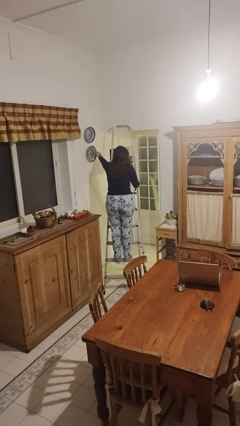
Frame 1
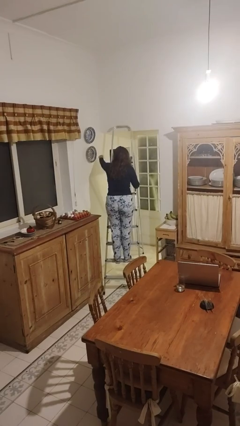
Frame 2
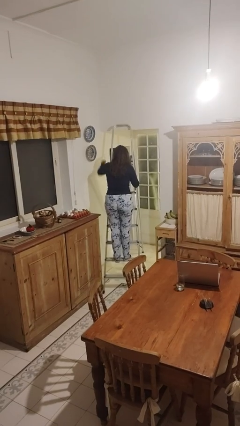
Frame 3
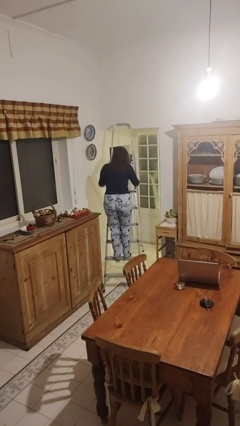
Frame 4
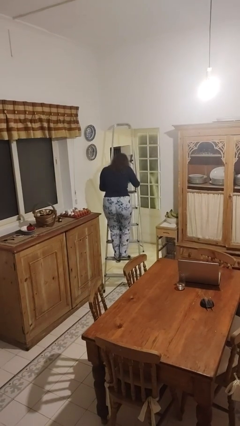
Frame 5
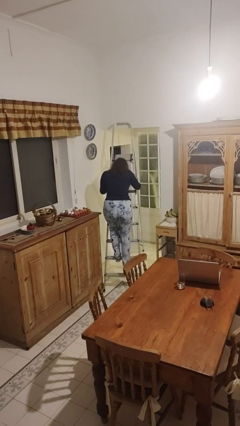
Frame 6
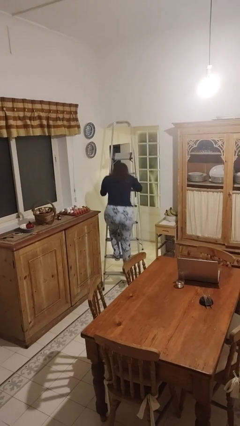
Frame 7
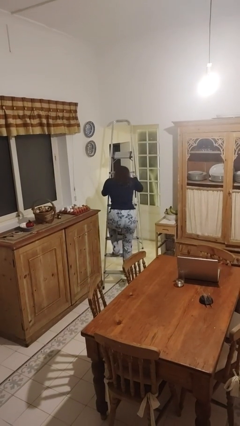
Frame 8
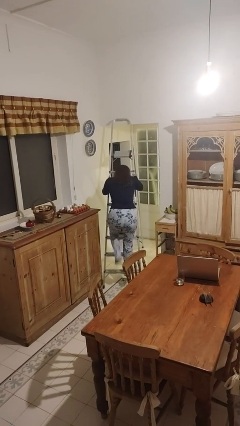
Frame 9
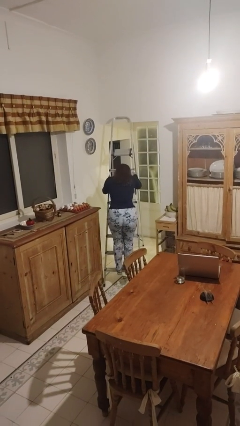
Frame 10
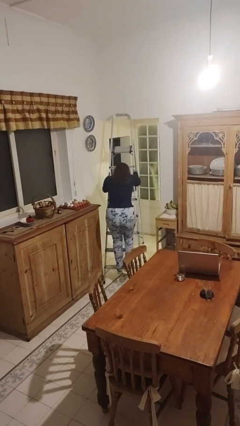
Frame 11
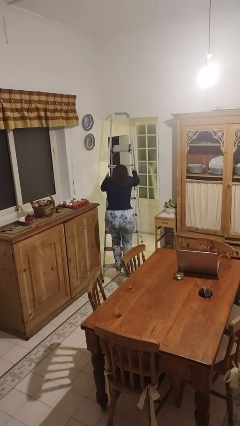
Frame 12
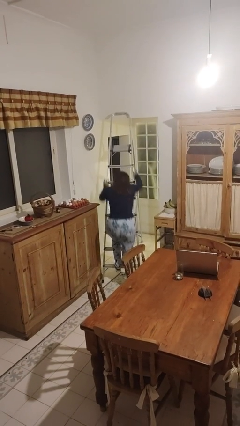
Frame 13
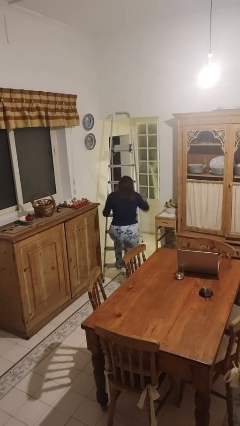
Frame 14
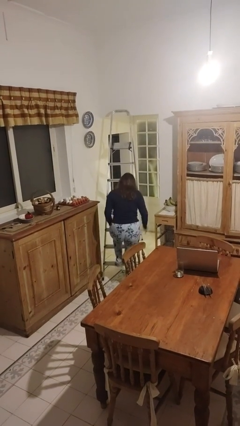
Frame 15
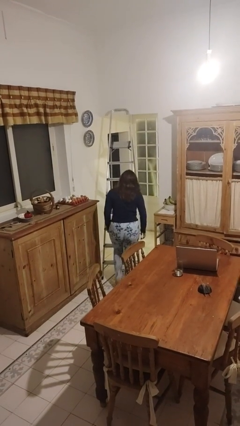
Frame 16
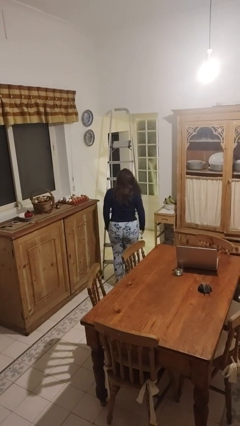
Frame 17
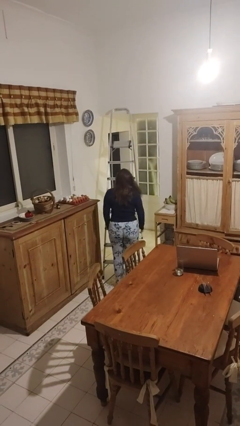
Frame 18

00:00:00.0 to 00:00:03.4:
person climbs down ladder

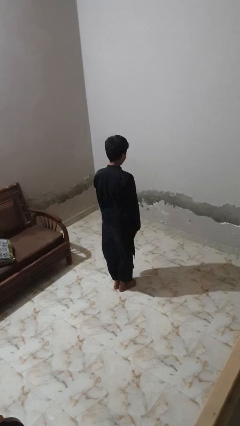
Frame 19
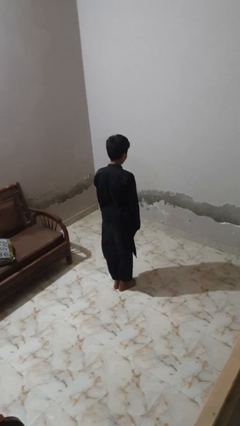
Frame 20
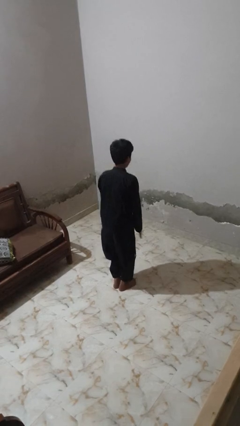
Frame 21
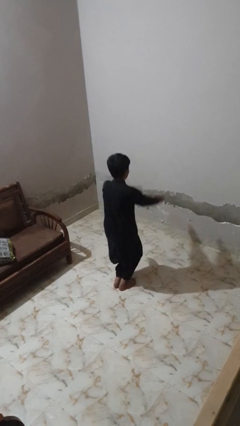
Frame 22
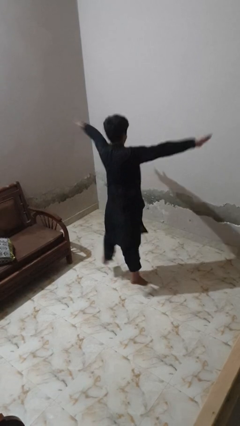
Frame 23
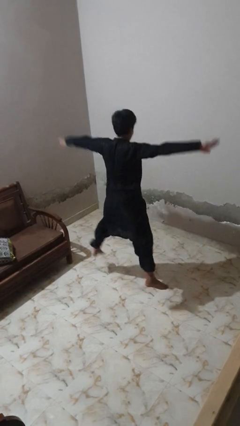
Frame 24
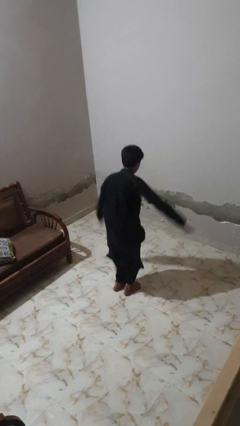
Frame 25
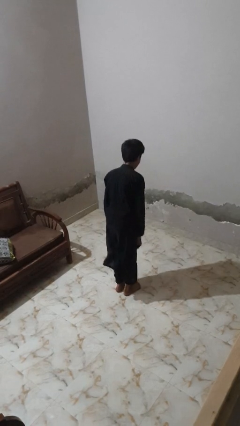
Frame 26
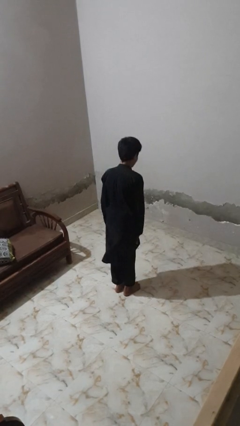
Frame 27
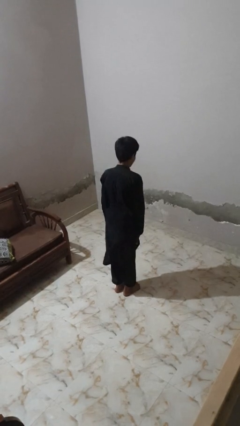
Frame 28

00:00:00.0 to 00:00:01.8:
person exercises with jumping jacks

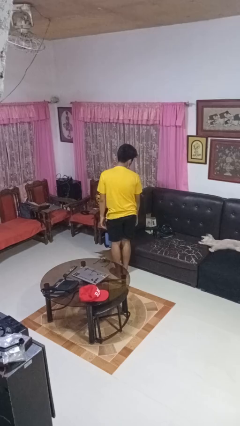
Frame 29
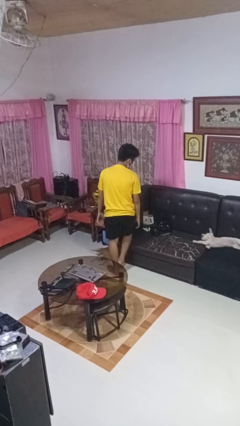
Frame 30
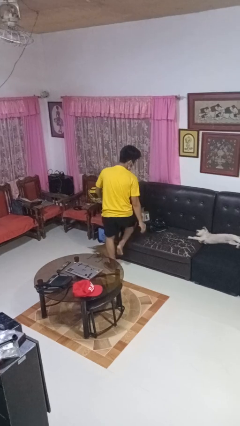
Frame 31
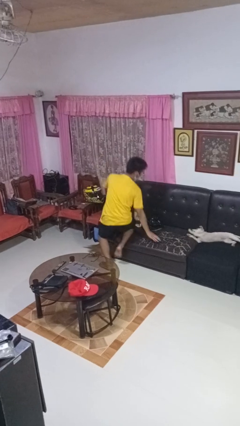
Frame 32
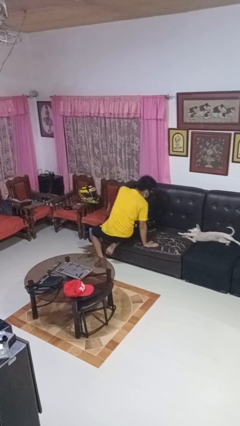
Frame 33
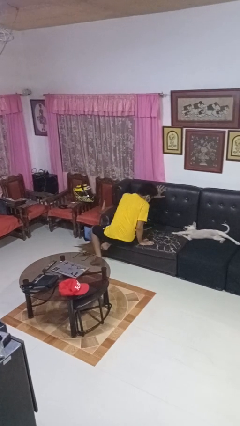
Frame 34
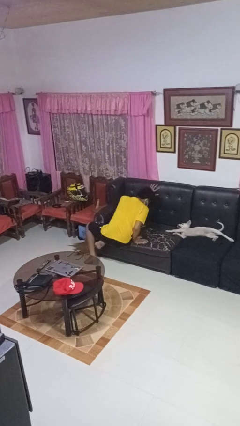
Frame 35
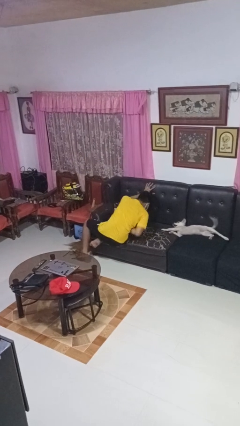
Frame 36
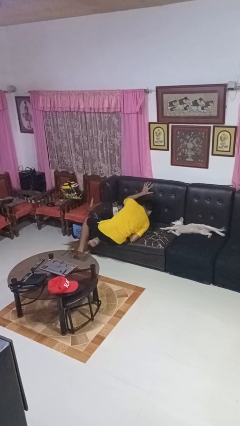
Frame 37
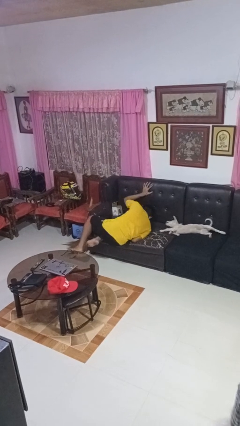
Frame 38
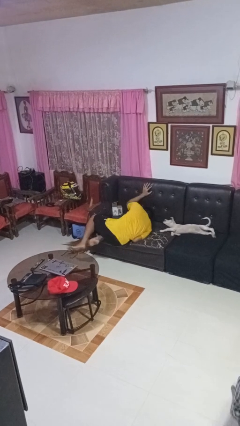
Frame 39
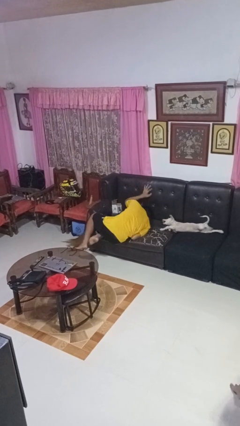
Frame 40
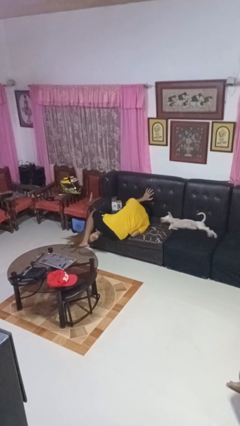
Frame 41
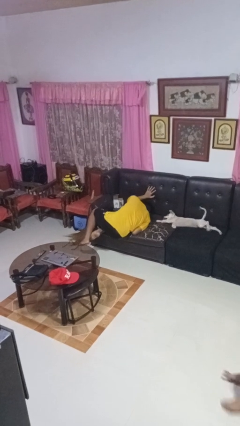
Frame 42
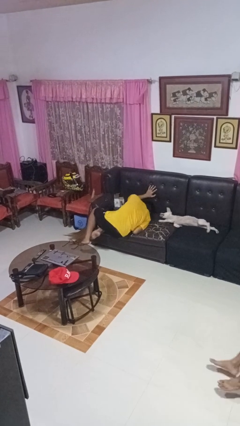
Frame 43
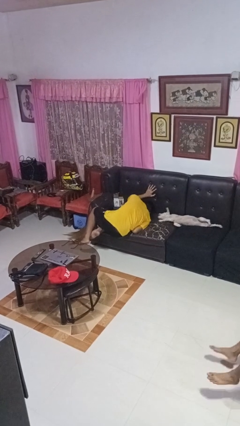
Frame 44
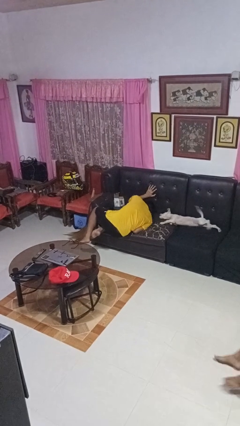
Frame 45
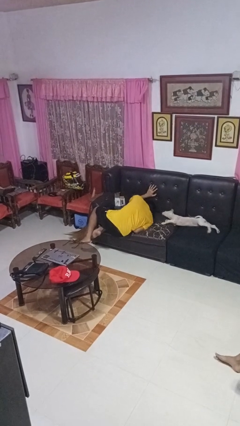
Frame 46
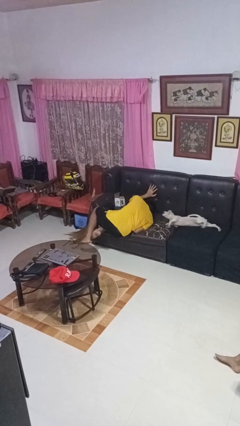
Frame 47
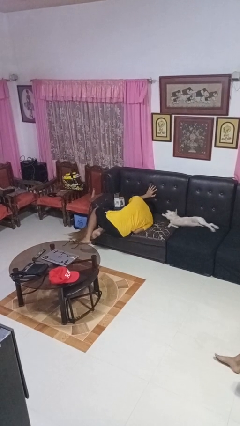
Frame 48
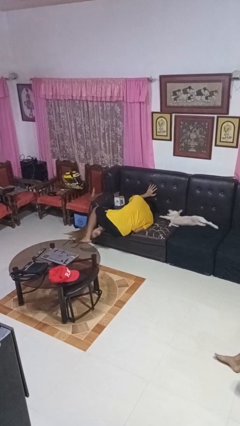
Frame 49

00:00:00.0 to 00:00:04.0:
person lies down on couch

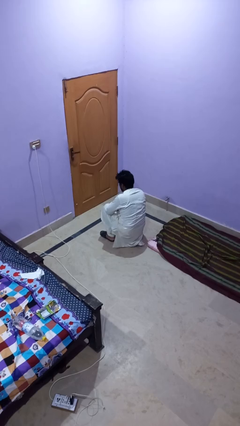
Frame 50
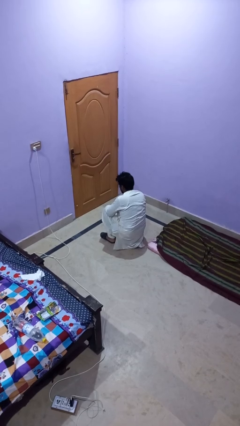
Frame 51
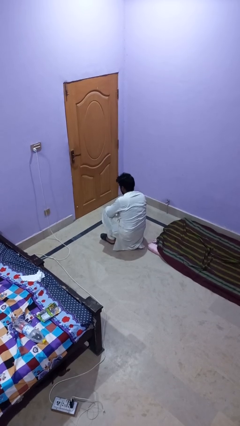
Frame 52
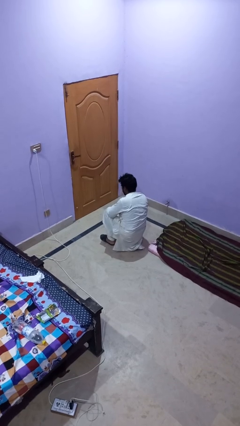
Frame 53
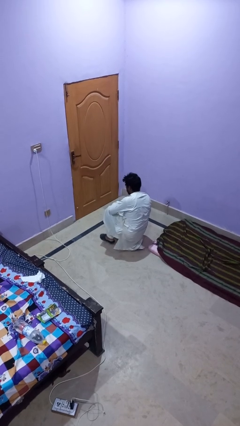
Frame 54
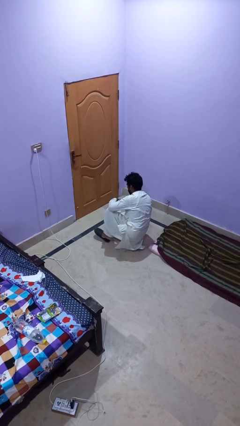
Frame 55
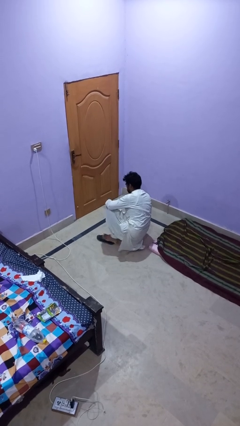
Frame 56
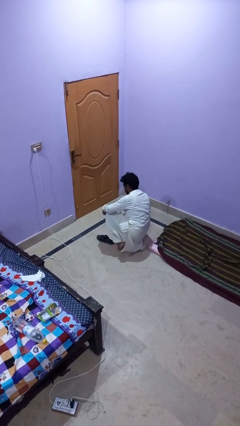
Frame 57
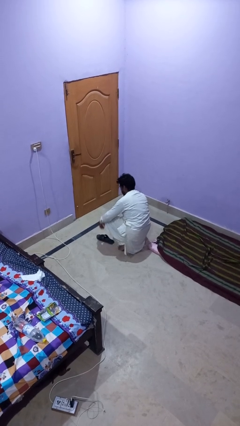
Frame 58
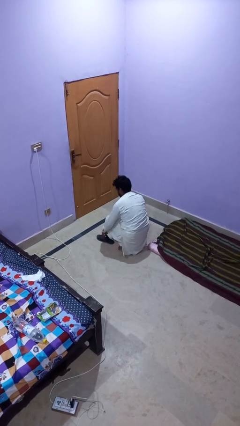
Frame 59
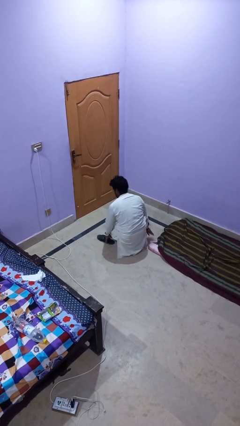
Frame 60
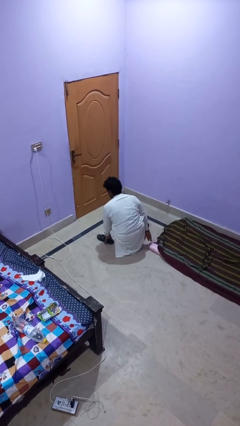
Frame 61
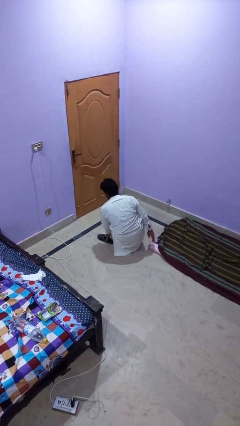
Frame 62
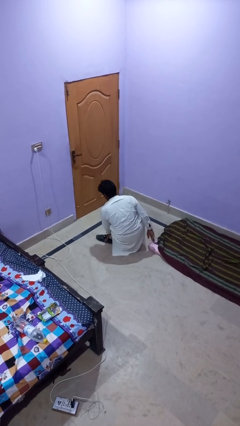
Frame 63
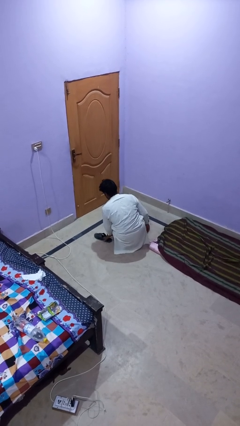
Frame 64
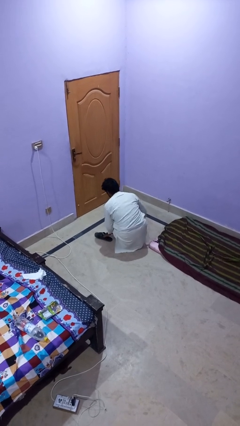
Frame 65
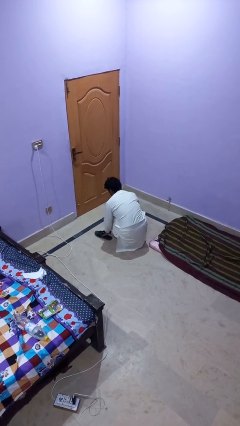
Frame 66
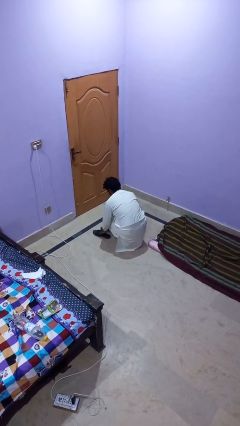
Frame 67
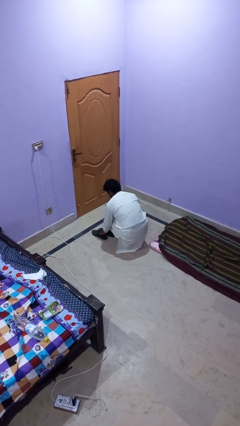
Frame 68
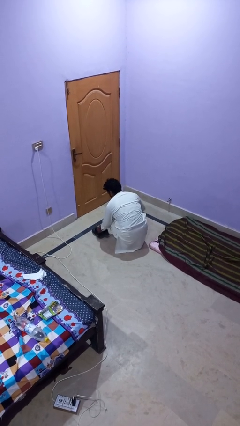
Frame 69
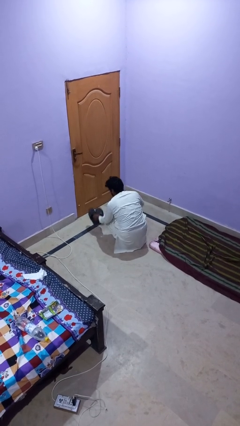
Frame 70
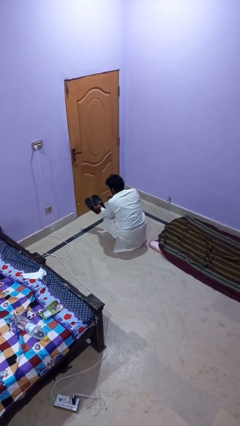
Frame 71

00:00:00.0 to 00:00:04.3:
person takes off shoes

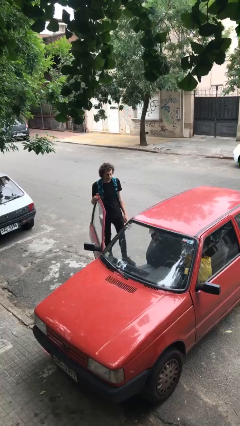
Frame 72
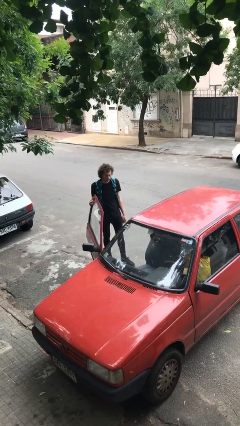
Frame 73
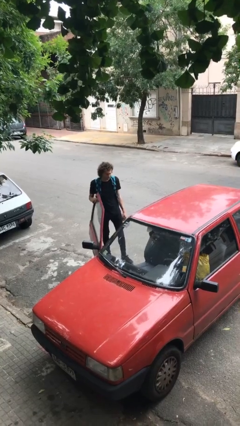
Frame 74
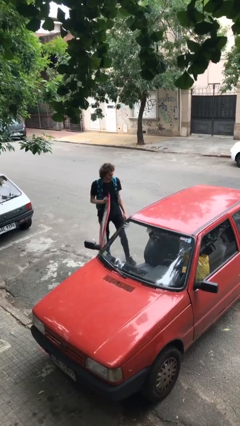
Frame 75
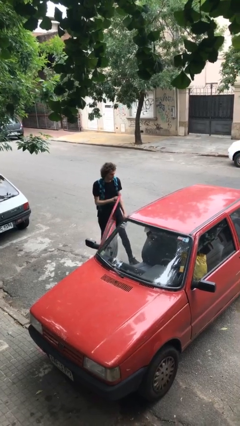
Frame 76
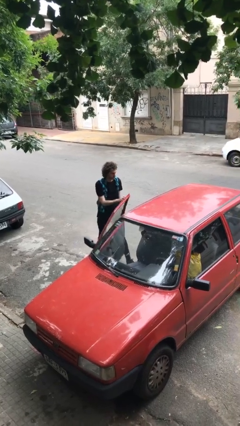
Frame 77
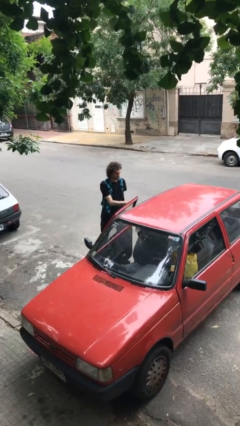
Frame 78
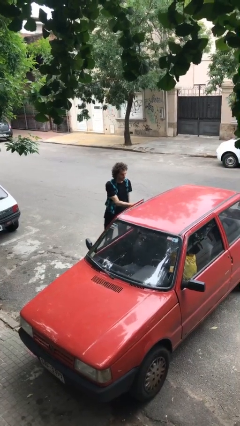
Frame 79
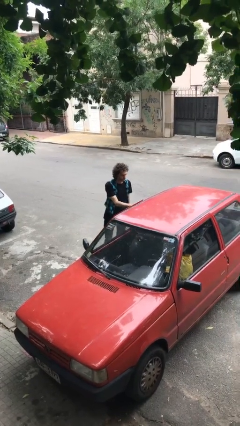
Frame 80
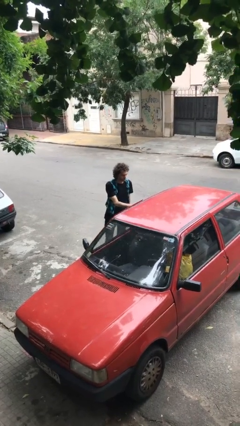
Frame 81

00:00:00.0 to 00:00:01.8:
person closes car trunk

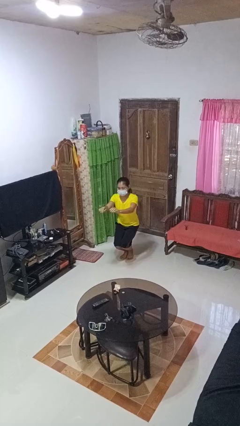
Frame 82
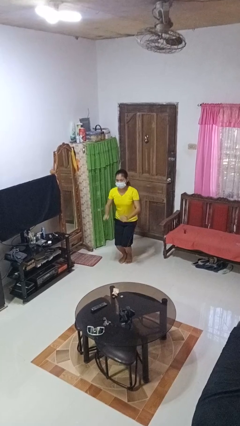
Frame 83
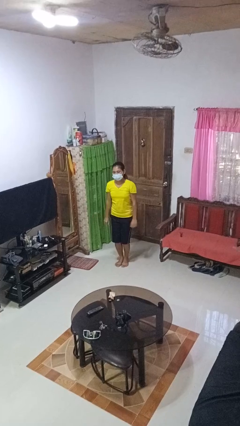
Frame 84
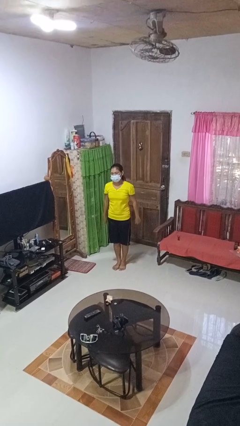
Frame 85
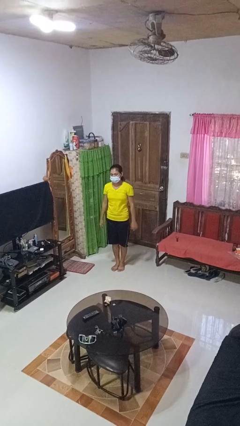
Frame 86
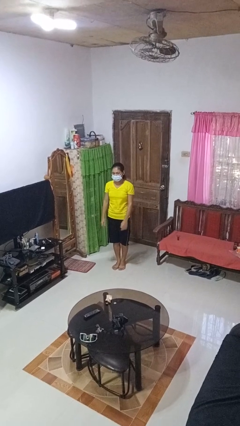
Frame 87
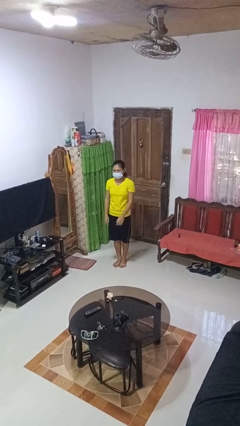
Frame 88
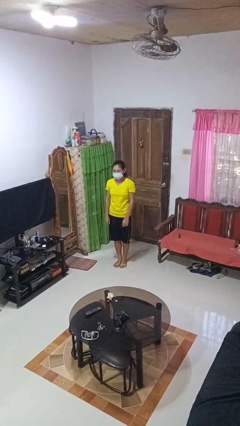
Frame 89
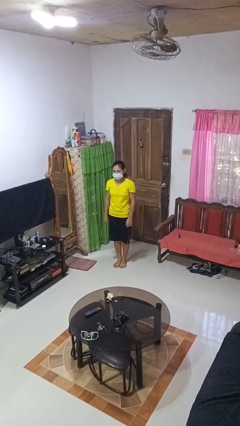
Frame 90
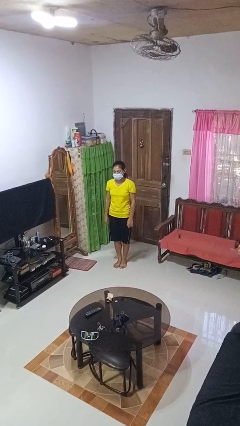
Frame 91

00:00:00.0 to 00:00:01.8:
person stands up
